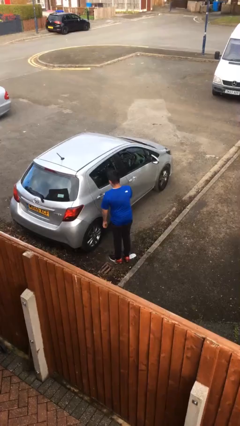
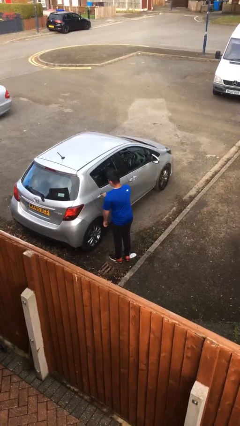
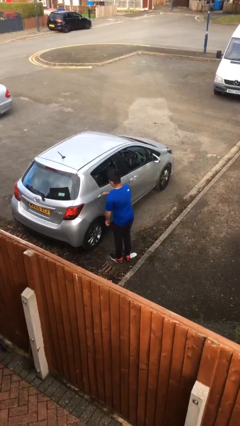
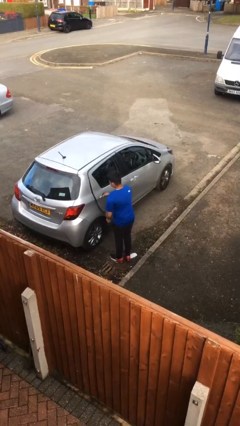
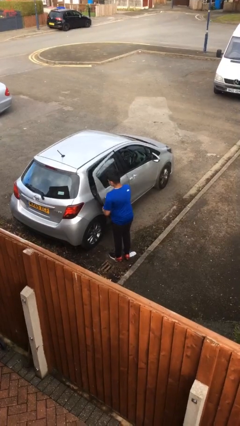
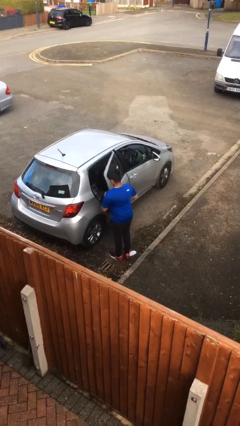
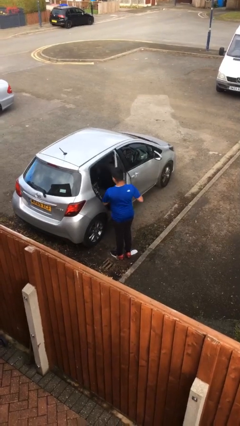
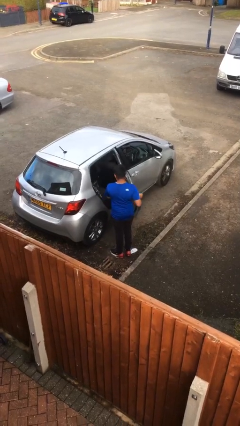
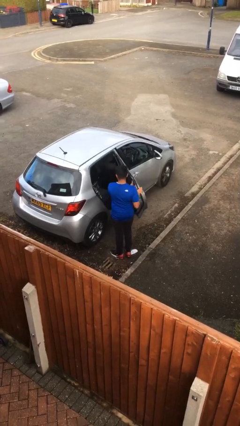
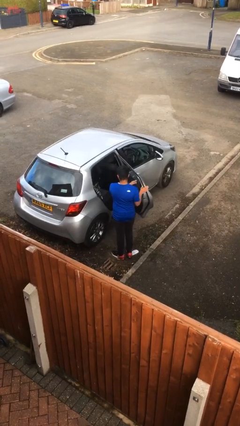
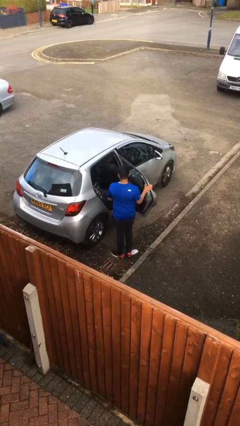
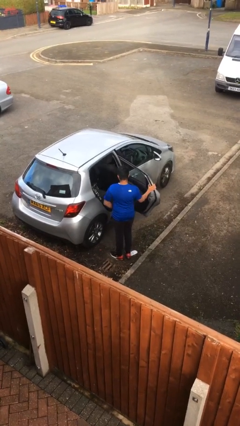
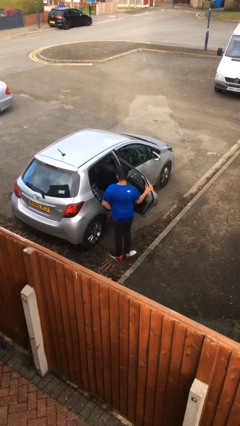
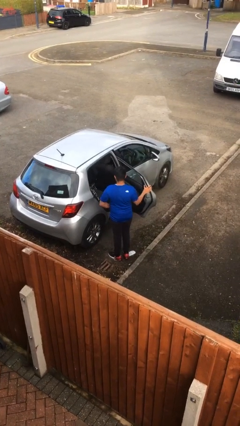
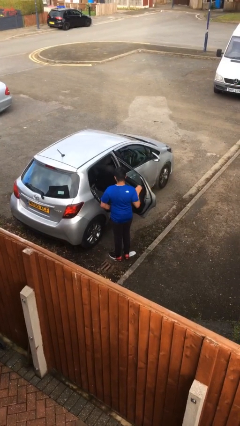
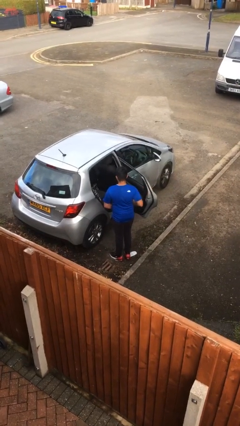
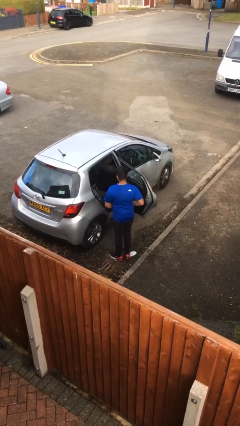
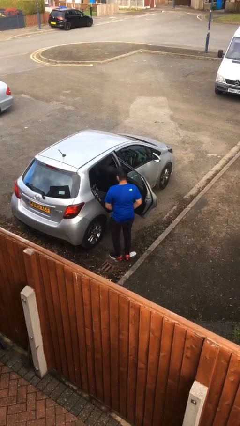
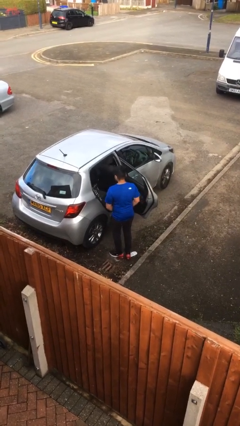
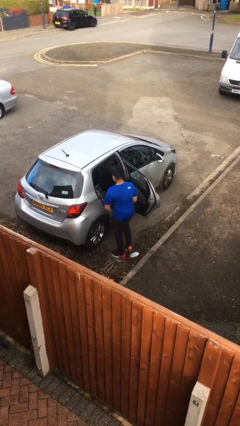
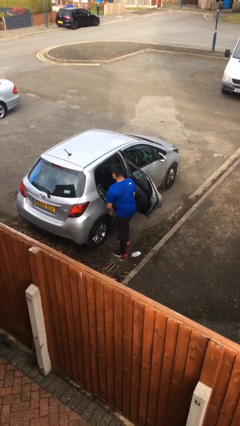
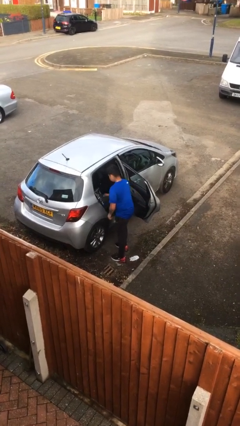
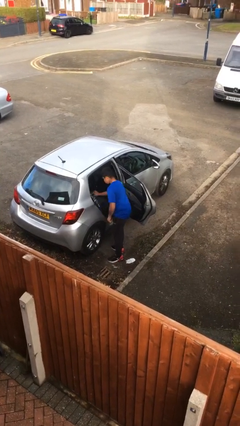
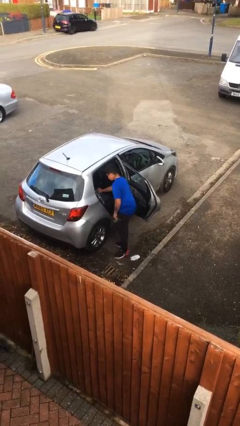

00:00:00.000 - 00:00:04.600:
person opens car door

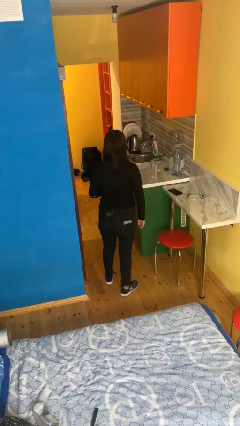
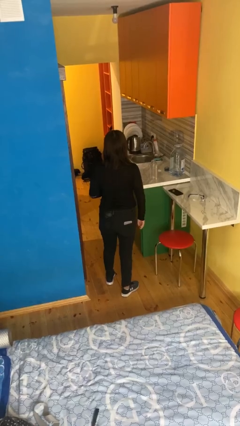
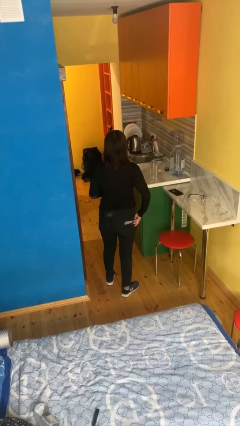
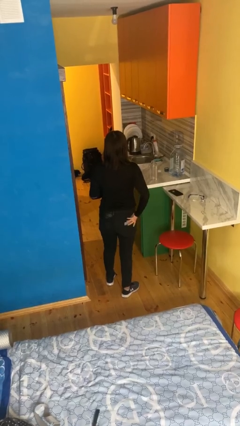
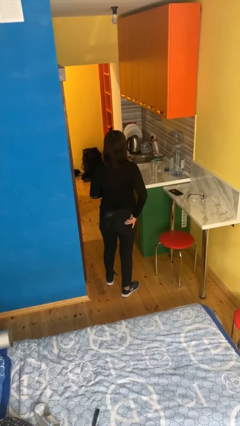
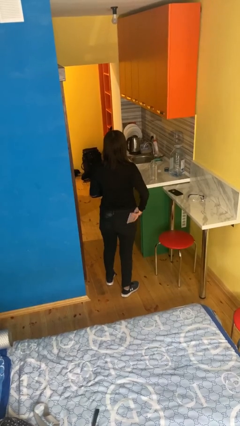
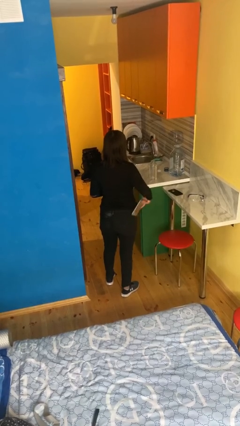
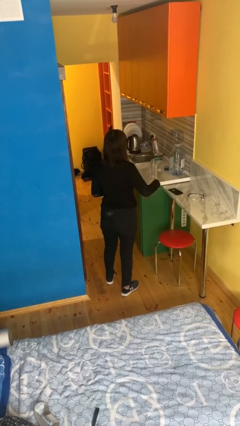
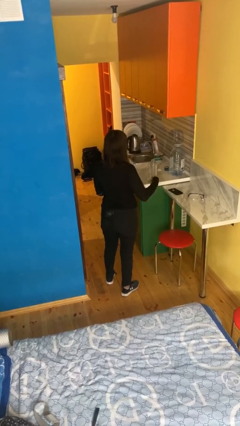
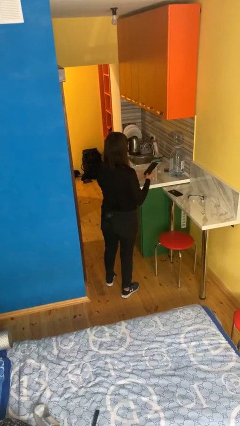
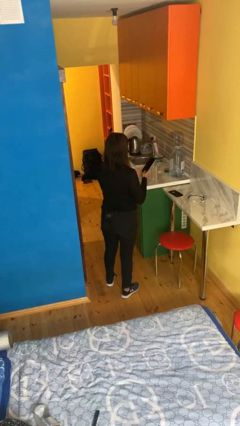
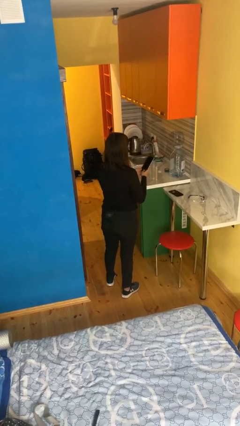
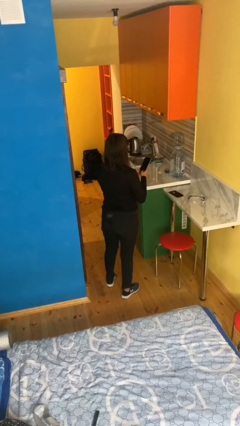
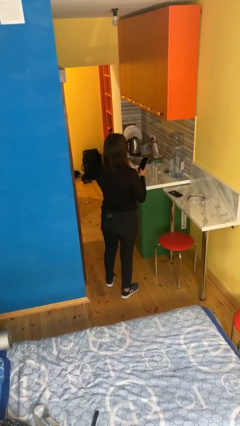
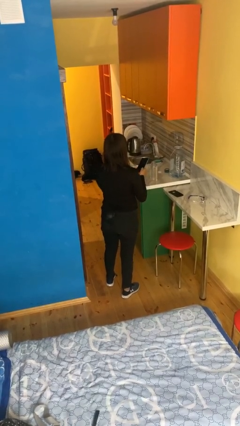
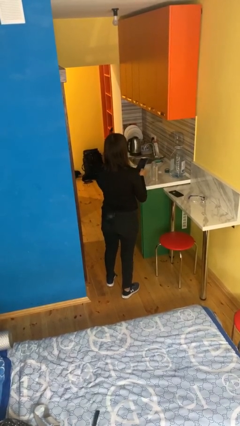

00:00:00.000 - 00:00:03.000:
person takes phone from pocket

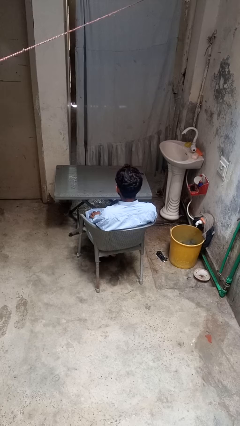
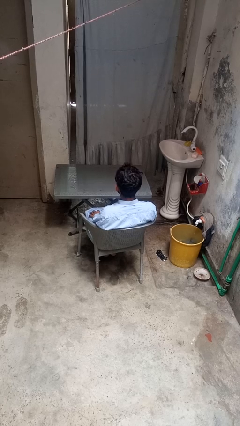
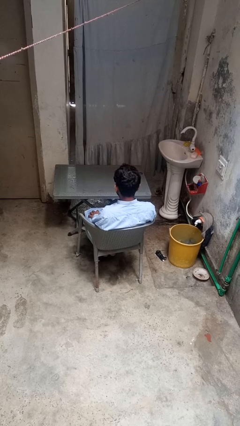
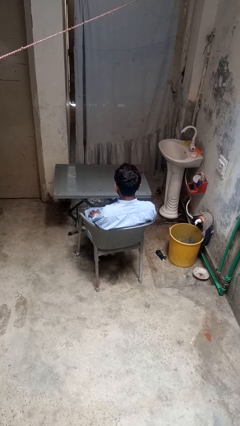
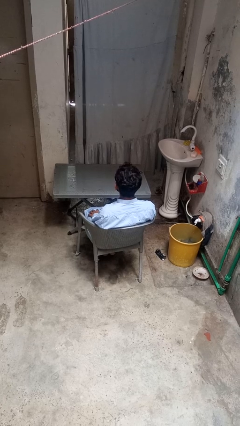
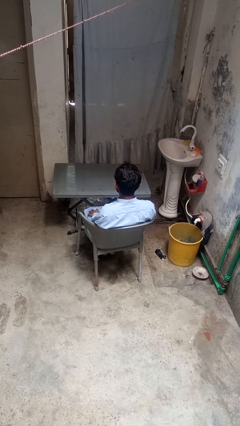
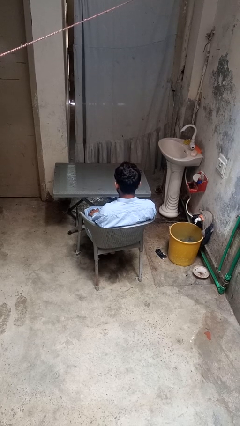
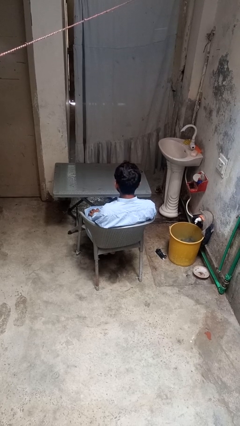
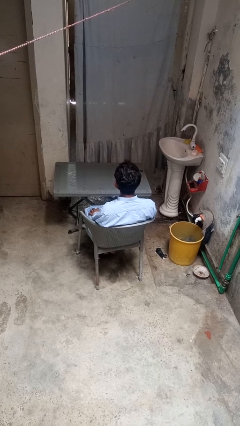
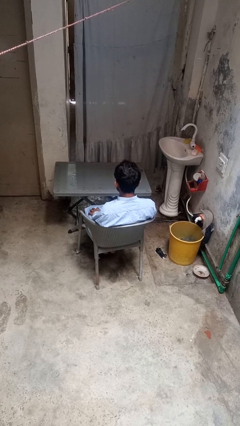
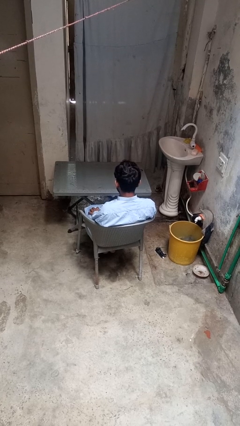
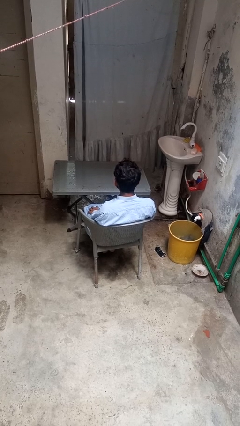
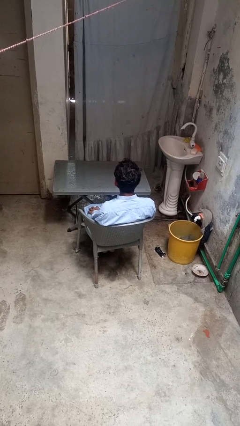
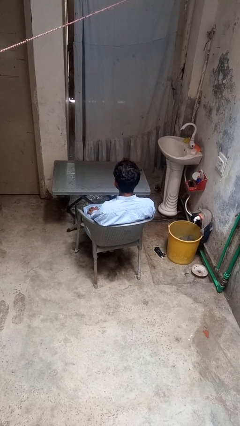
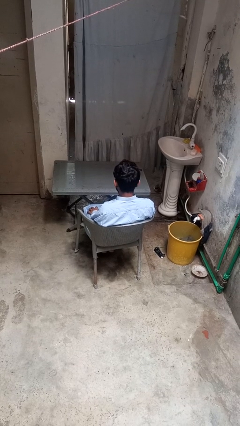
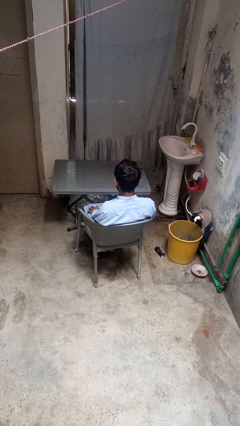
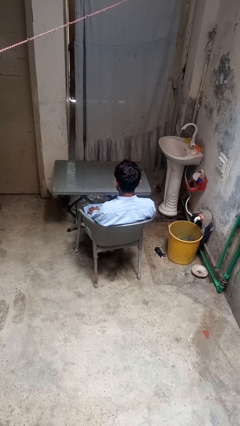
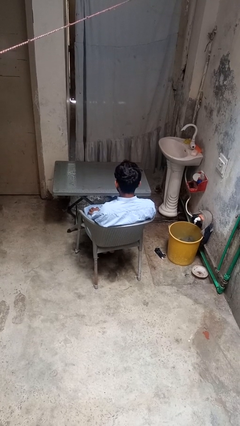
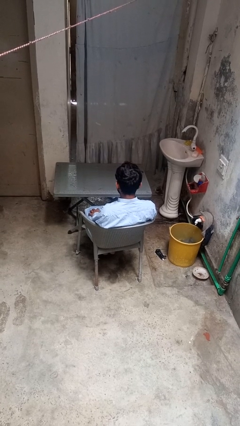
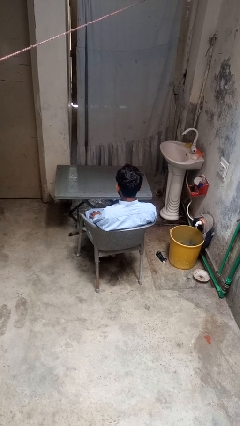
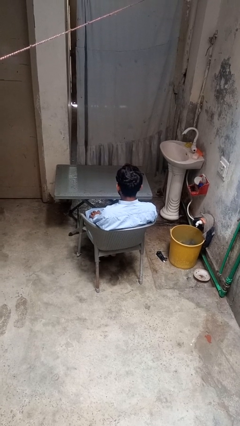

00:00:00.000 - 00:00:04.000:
person nods head

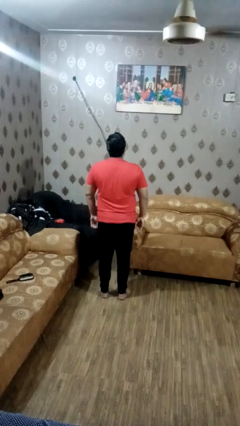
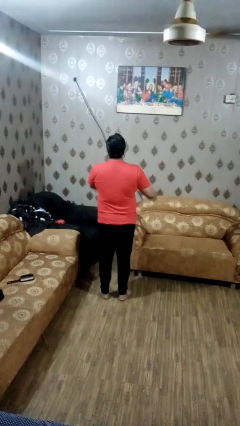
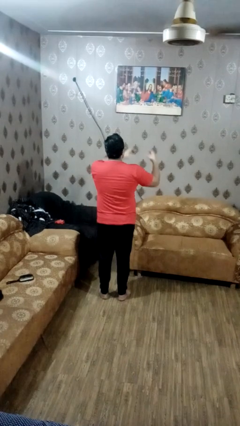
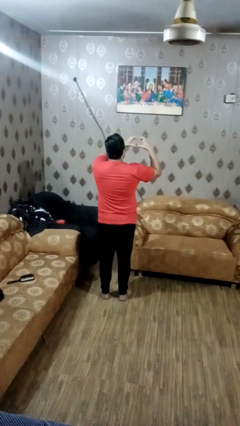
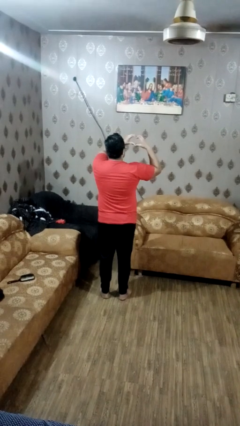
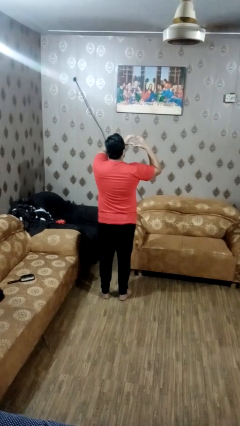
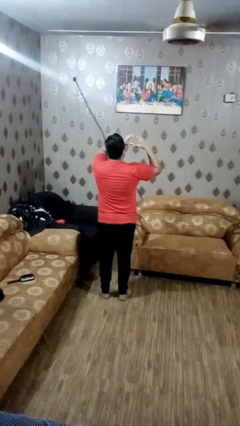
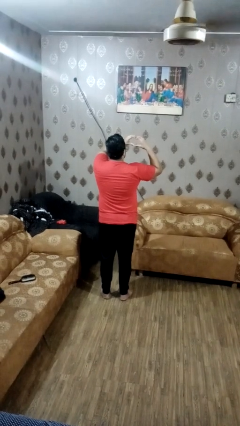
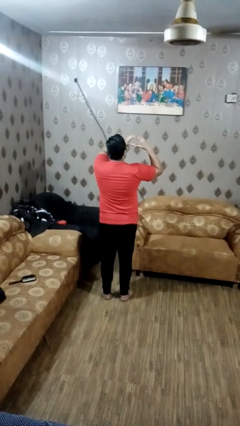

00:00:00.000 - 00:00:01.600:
person gestures heart

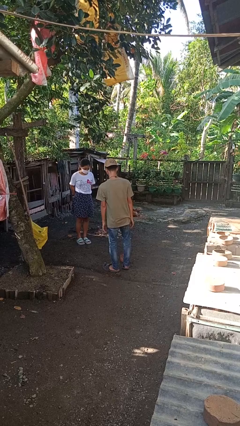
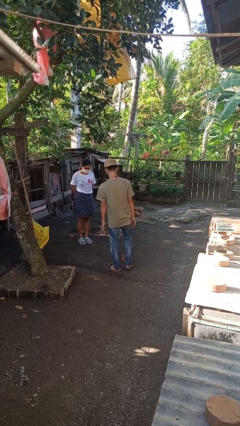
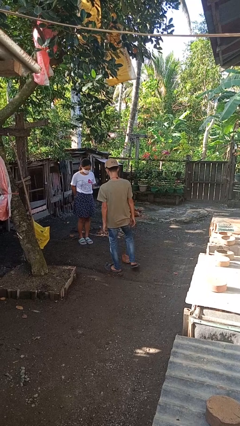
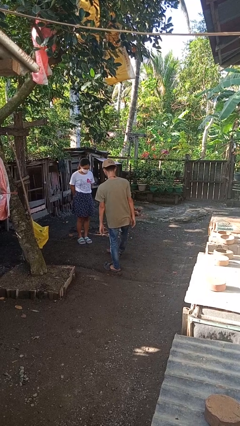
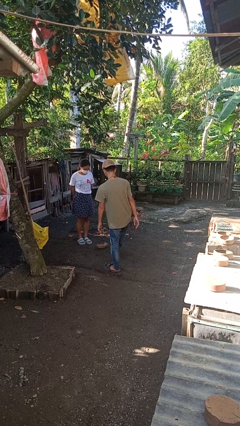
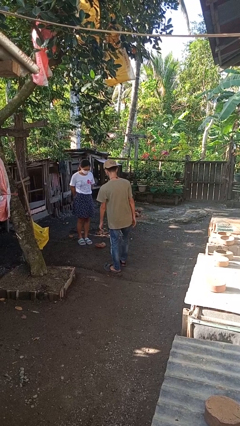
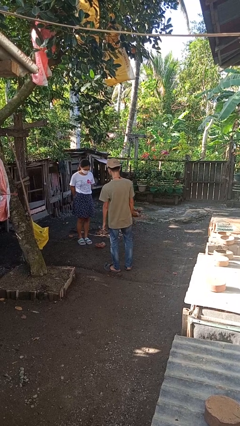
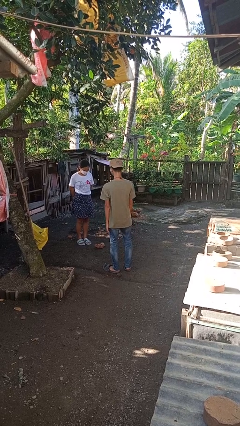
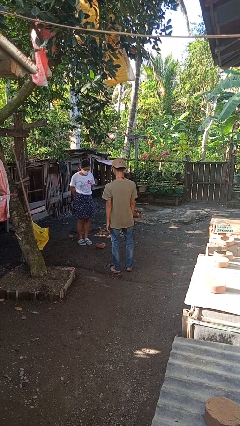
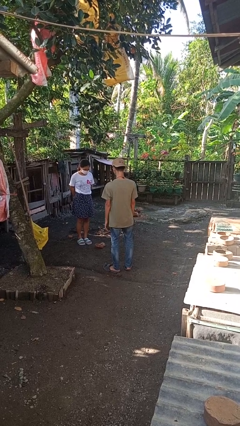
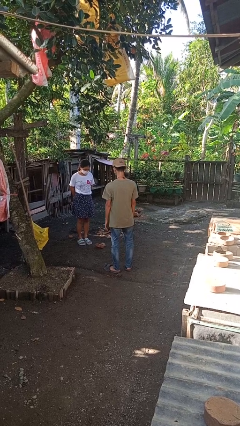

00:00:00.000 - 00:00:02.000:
person kicks object to person

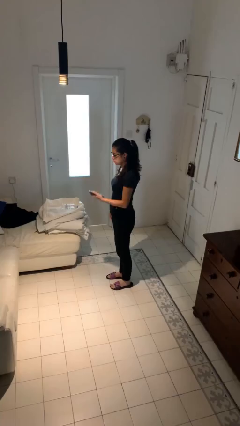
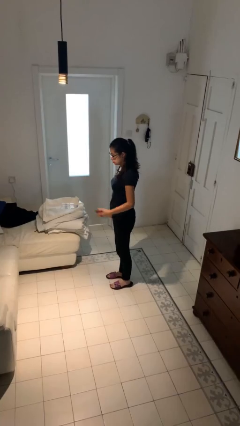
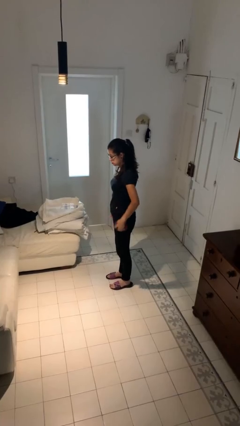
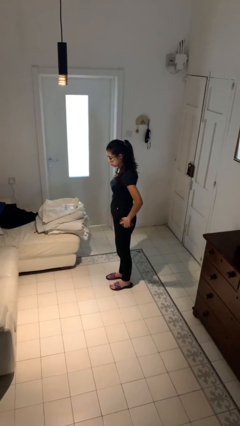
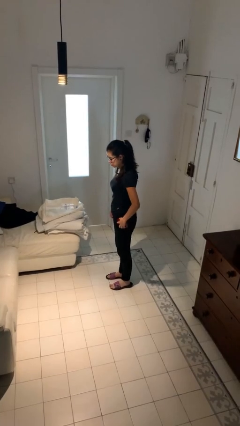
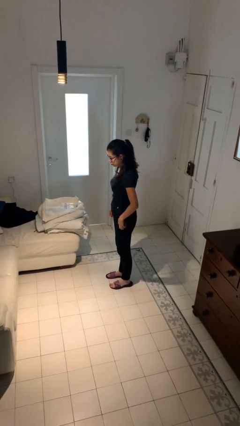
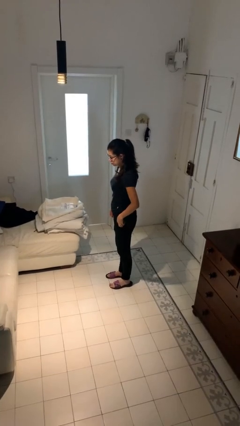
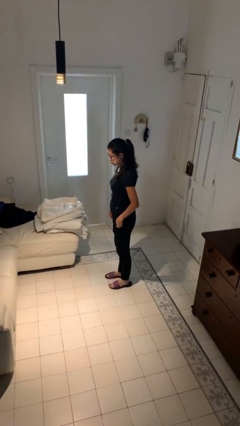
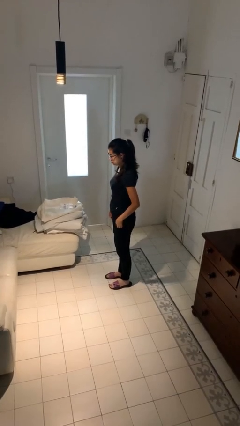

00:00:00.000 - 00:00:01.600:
person puts phone into pocket

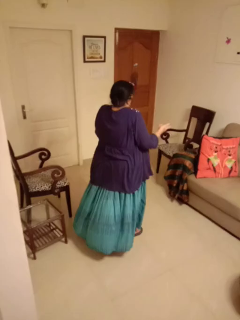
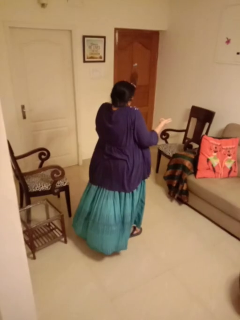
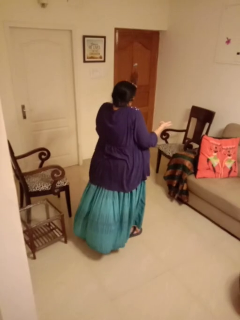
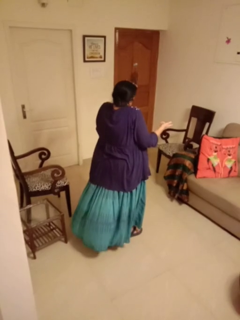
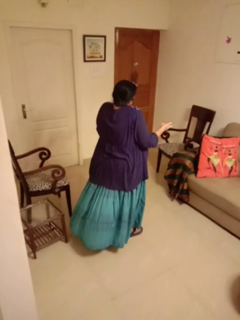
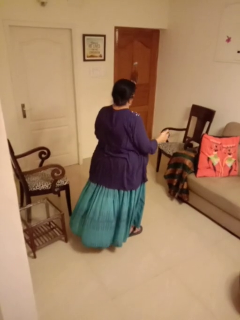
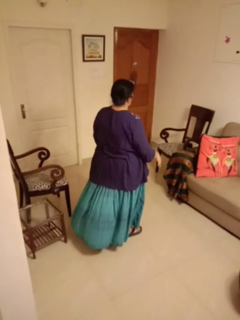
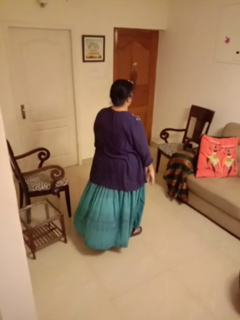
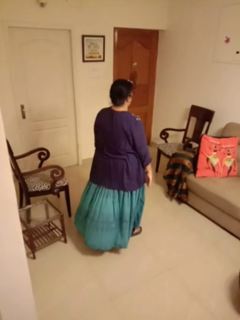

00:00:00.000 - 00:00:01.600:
person shrugs
